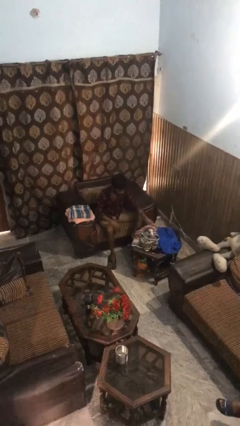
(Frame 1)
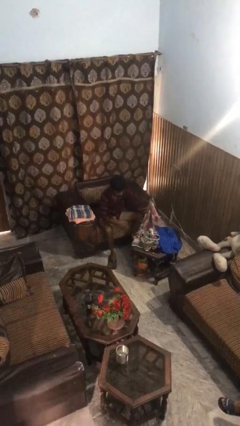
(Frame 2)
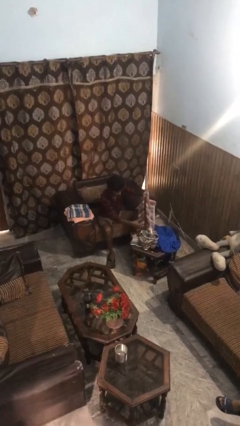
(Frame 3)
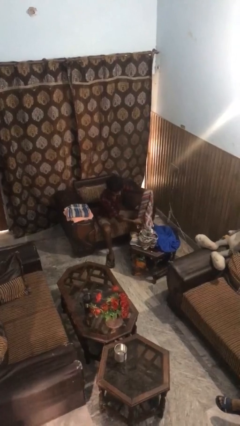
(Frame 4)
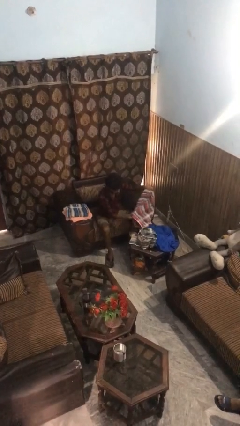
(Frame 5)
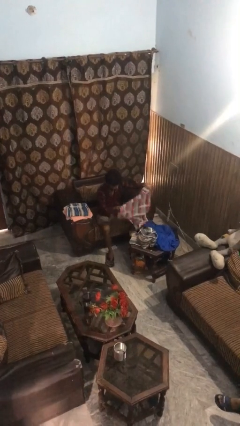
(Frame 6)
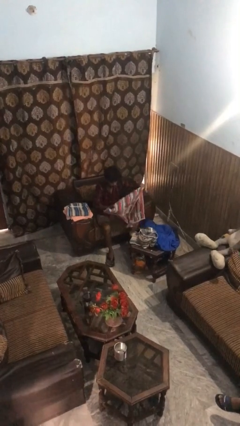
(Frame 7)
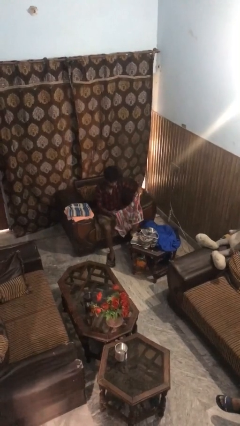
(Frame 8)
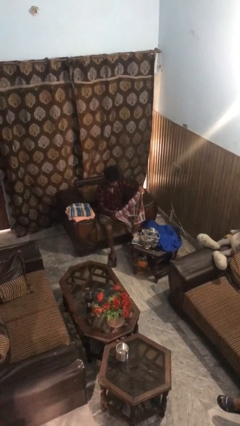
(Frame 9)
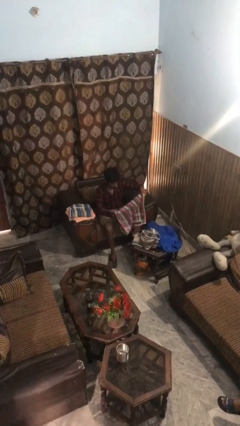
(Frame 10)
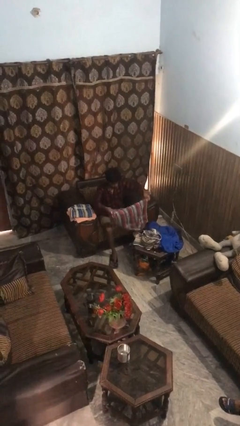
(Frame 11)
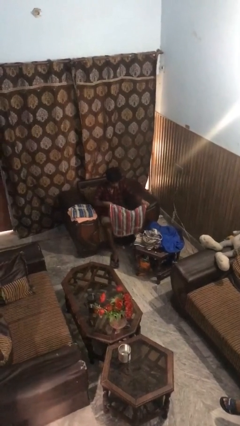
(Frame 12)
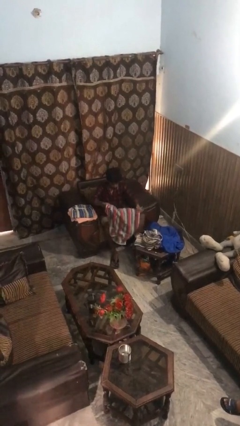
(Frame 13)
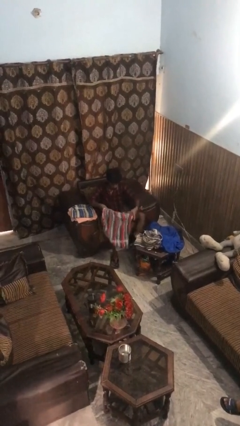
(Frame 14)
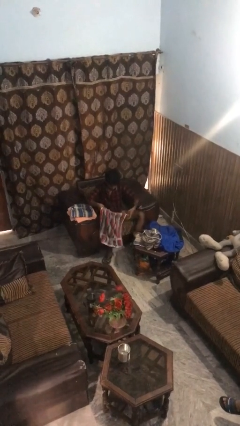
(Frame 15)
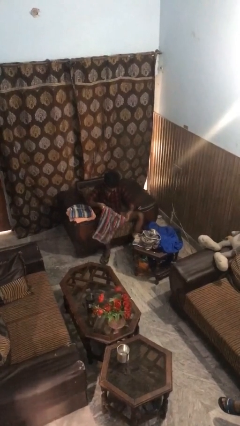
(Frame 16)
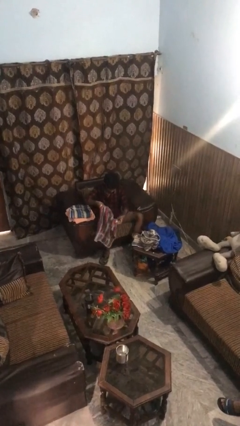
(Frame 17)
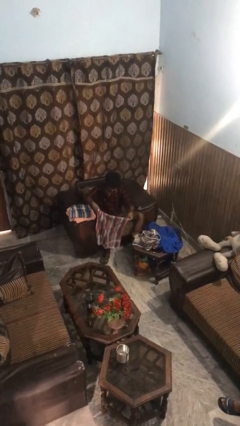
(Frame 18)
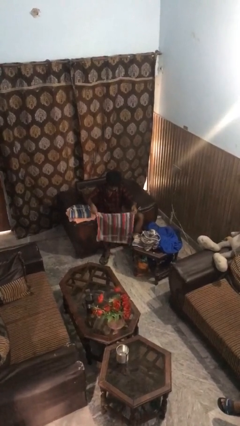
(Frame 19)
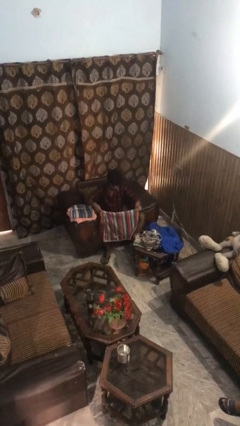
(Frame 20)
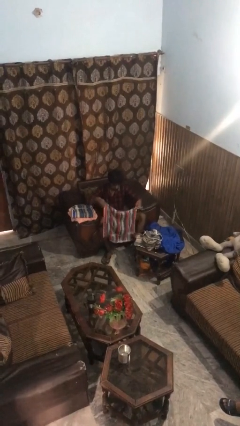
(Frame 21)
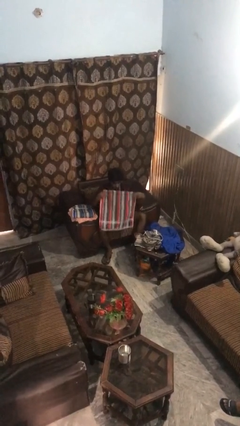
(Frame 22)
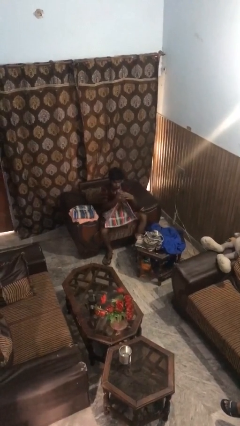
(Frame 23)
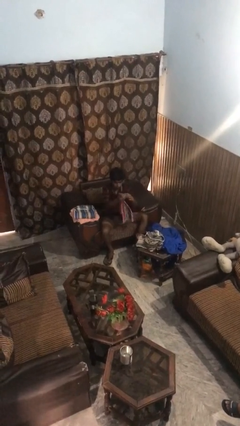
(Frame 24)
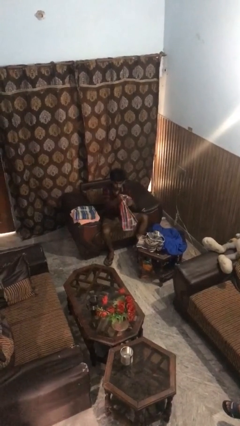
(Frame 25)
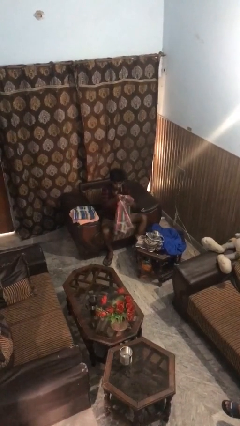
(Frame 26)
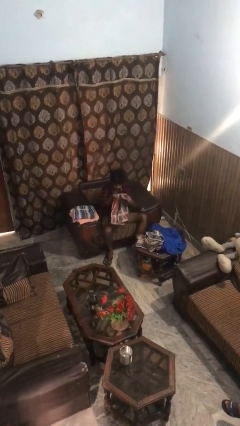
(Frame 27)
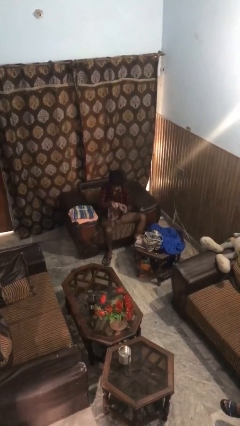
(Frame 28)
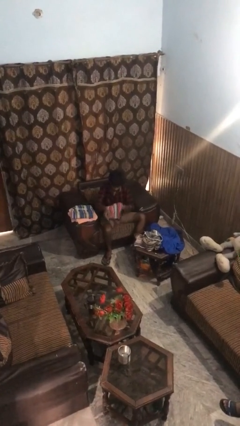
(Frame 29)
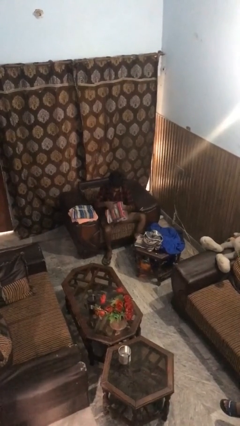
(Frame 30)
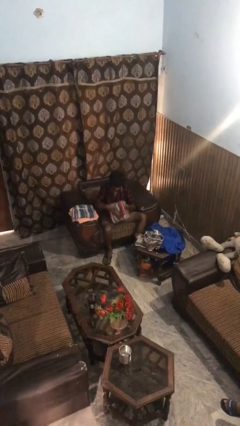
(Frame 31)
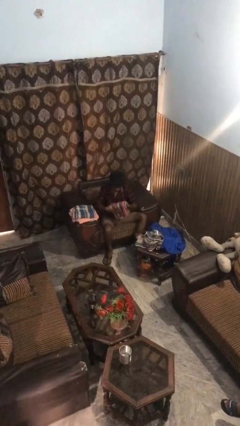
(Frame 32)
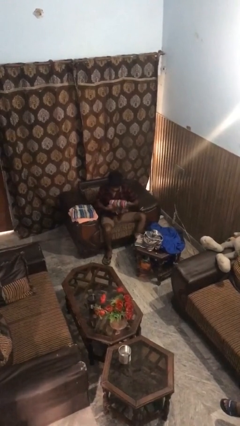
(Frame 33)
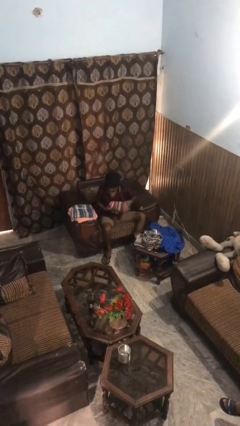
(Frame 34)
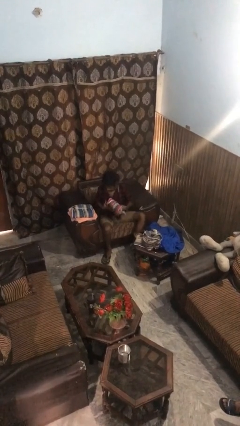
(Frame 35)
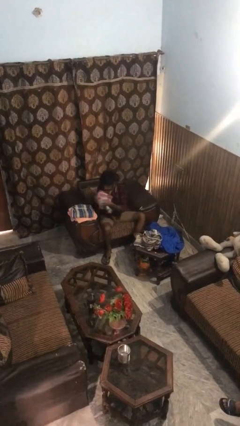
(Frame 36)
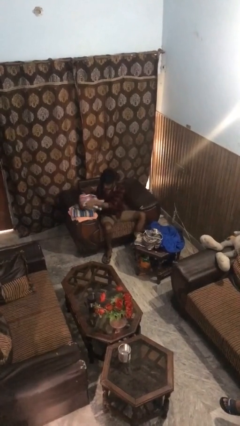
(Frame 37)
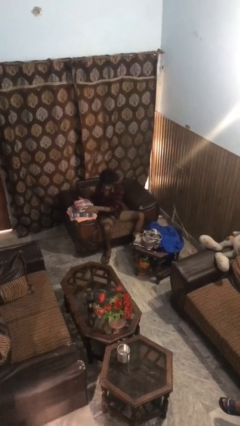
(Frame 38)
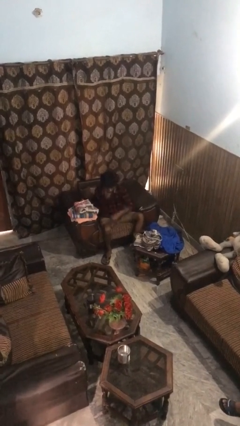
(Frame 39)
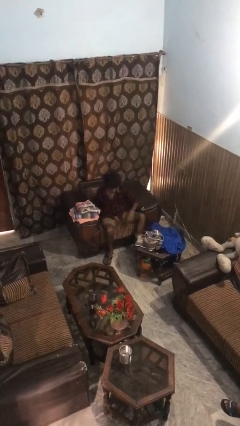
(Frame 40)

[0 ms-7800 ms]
person folds towel

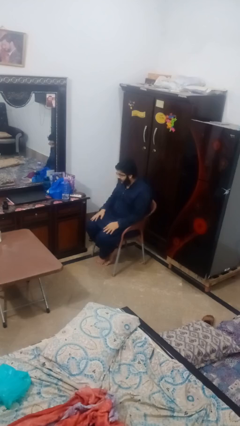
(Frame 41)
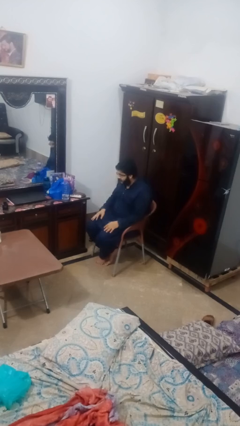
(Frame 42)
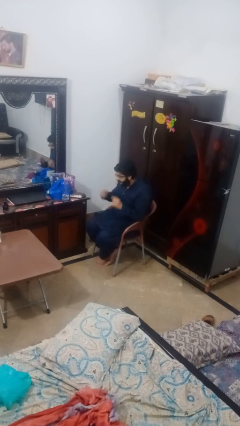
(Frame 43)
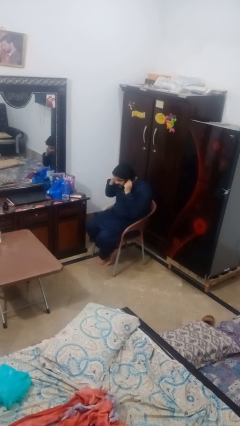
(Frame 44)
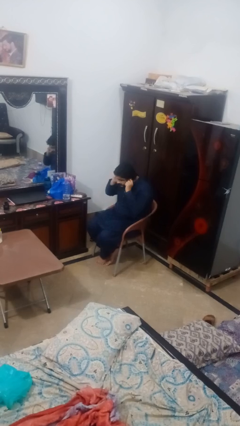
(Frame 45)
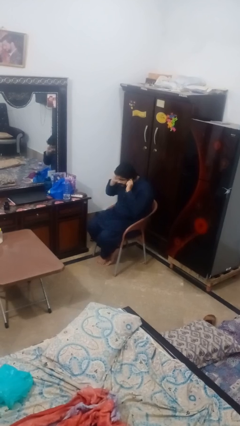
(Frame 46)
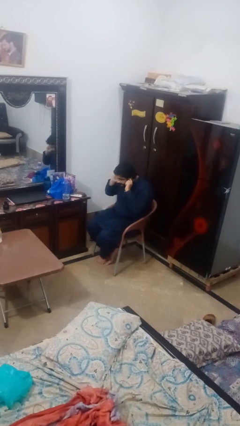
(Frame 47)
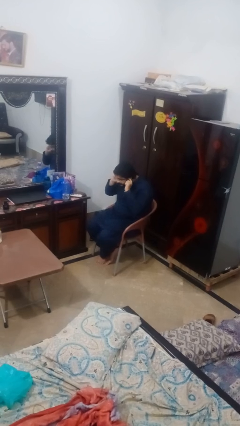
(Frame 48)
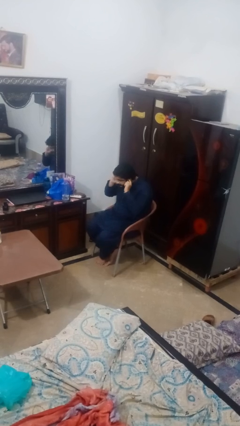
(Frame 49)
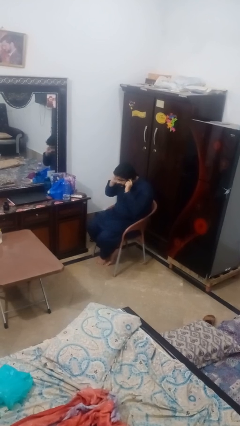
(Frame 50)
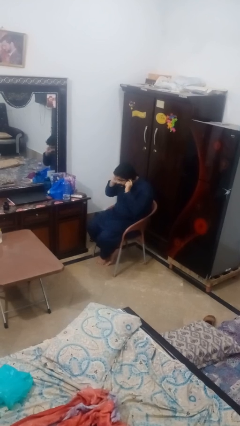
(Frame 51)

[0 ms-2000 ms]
person puts fingers in ear

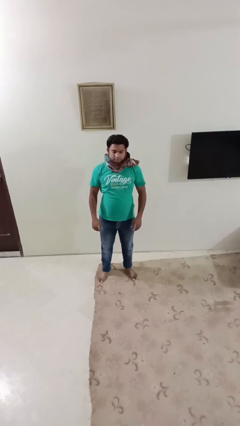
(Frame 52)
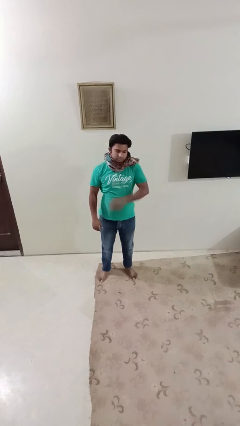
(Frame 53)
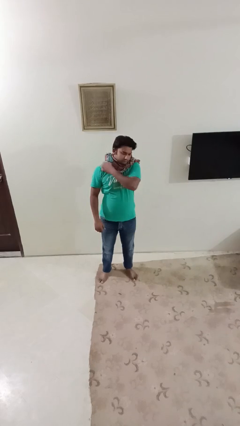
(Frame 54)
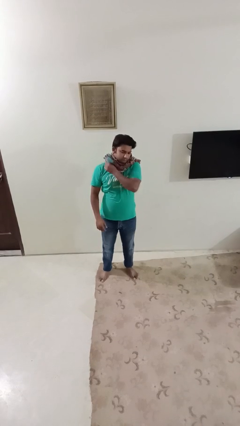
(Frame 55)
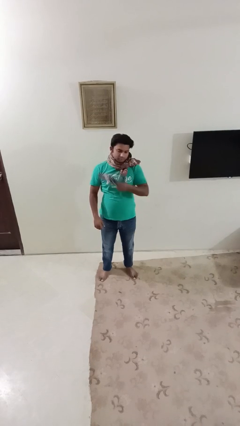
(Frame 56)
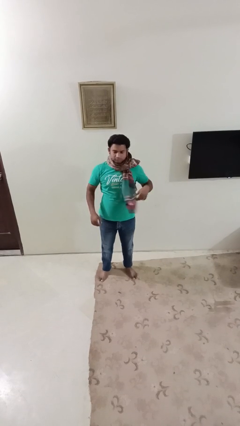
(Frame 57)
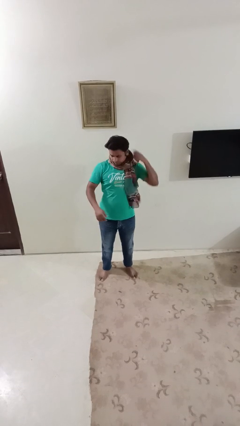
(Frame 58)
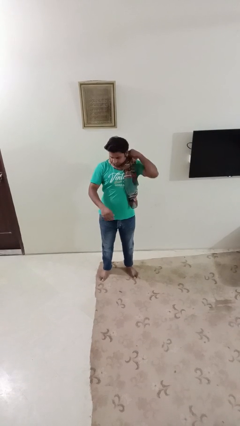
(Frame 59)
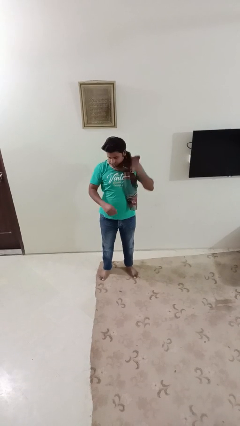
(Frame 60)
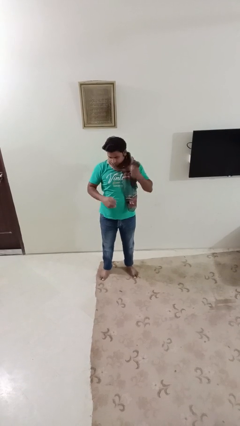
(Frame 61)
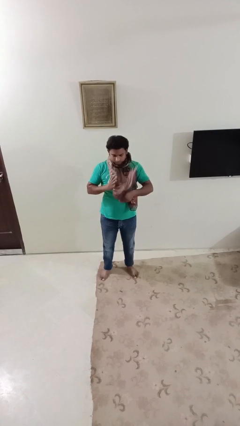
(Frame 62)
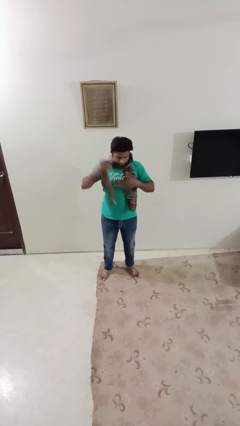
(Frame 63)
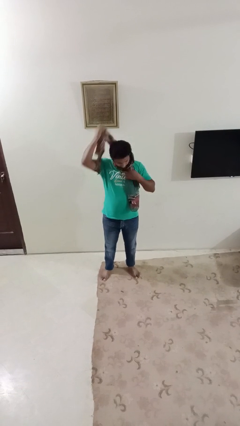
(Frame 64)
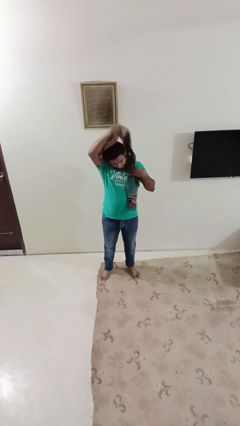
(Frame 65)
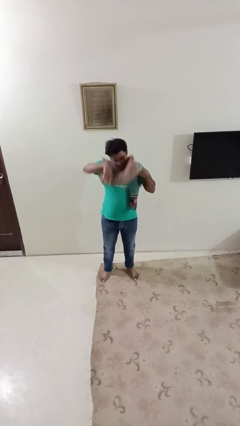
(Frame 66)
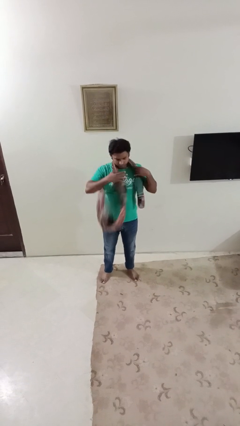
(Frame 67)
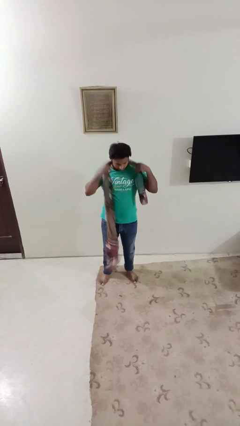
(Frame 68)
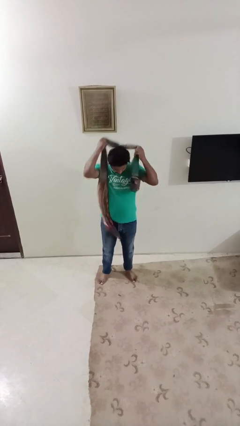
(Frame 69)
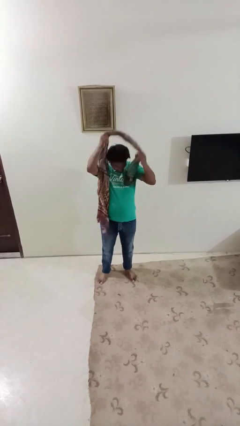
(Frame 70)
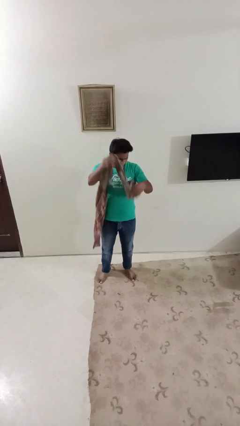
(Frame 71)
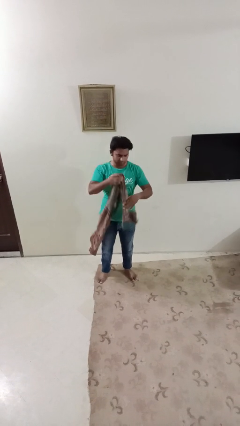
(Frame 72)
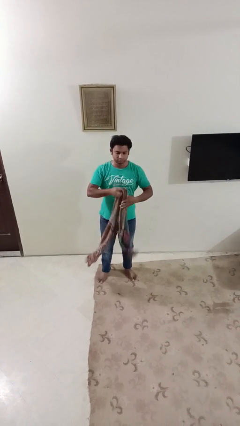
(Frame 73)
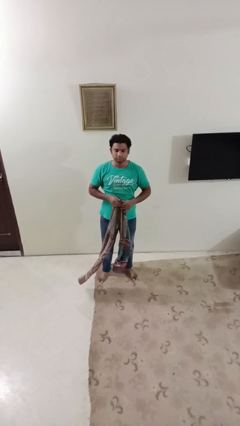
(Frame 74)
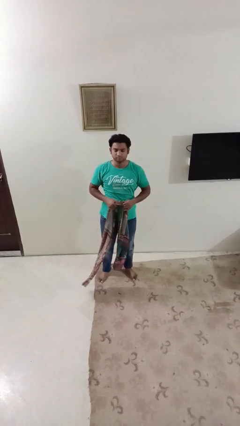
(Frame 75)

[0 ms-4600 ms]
person takes off scarf

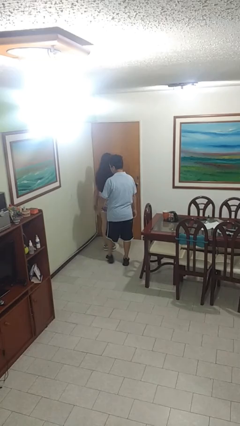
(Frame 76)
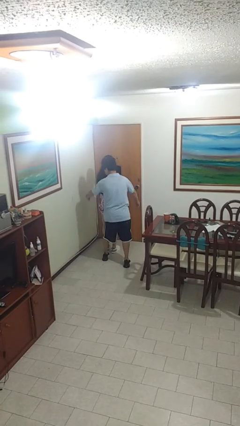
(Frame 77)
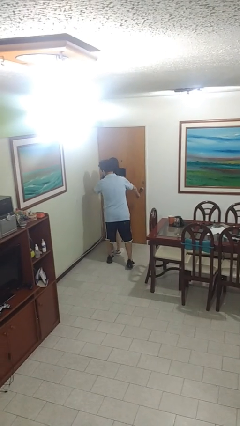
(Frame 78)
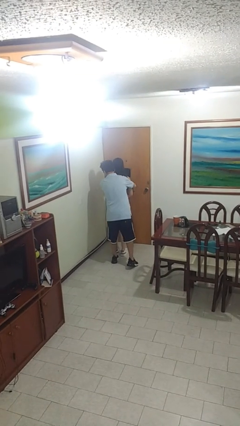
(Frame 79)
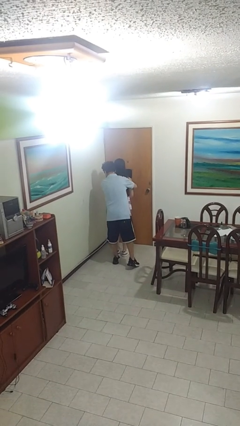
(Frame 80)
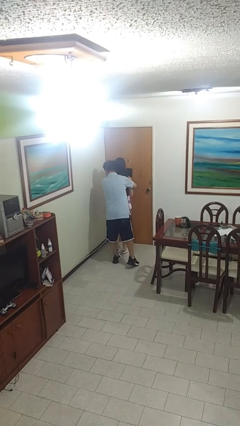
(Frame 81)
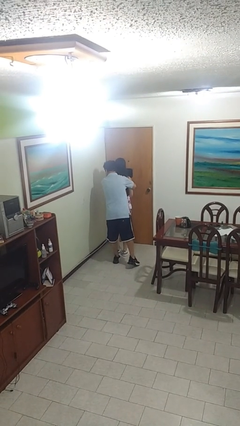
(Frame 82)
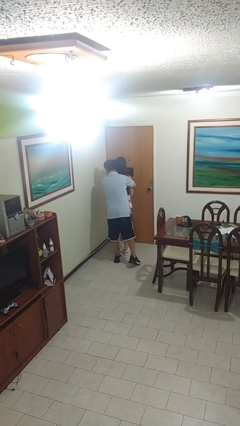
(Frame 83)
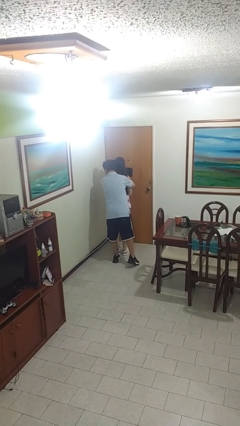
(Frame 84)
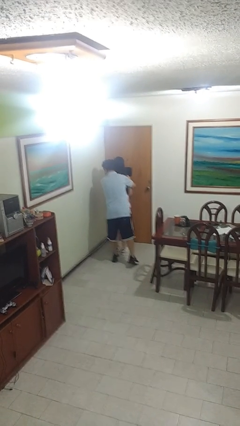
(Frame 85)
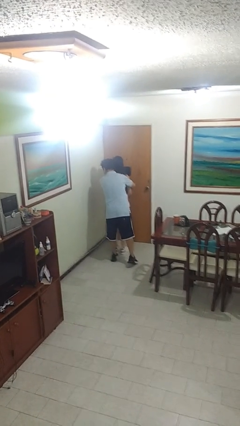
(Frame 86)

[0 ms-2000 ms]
person hugs person from behind

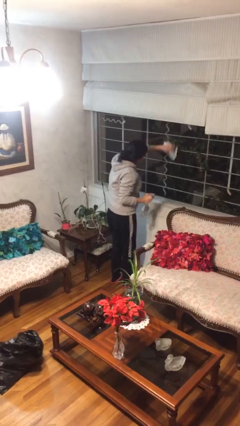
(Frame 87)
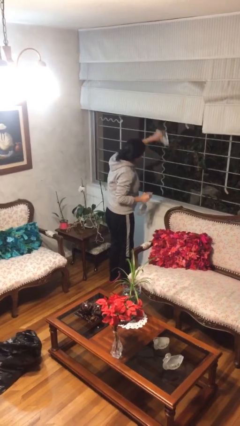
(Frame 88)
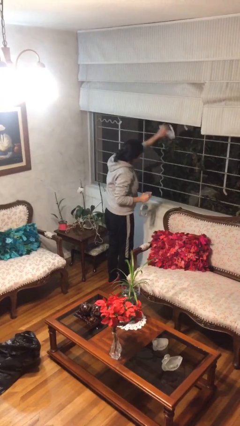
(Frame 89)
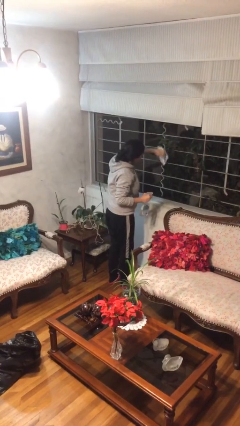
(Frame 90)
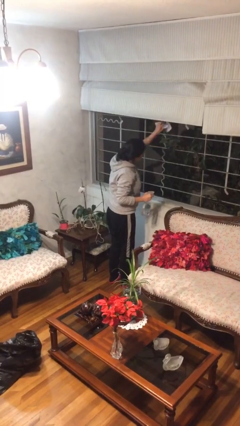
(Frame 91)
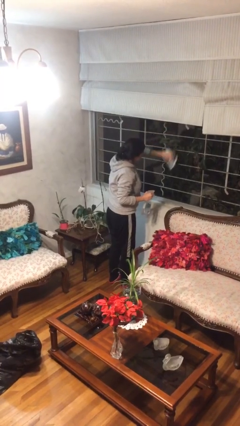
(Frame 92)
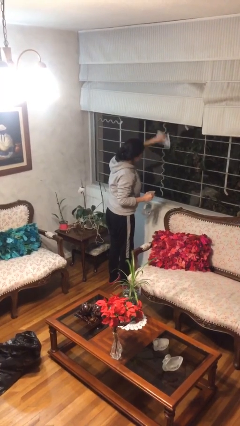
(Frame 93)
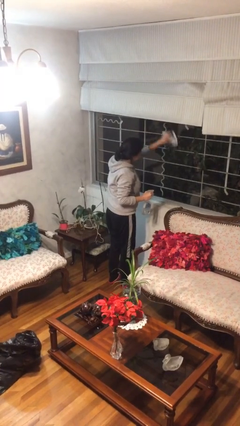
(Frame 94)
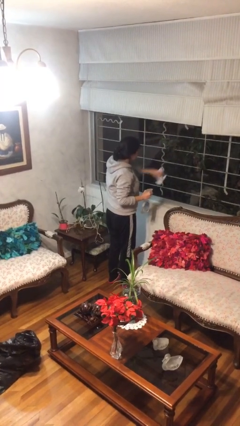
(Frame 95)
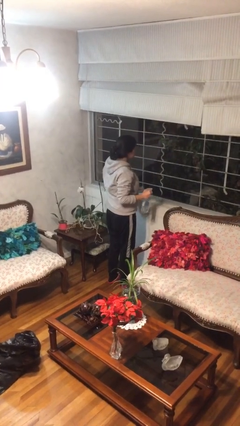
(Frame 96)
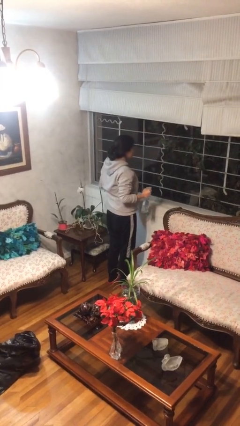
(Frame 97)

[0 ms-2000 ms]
person washes window
